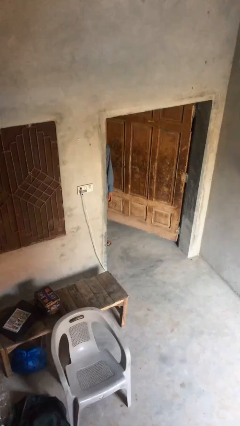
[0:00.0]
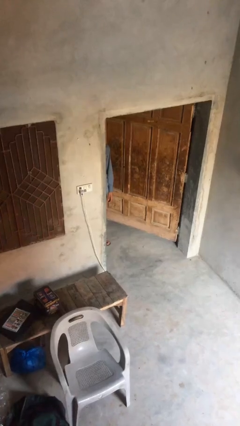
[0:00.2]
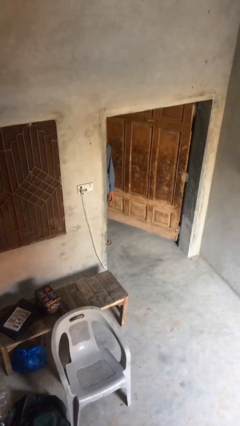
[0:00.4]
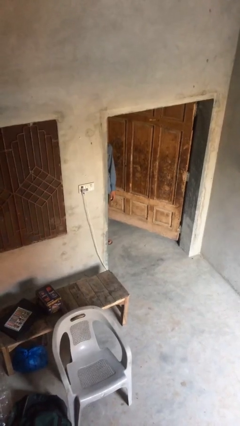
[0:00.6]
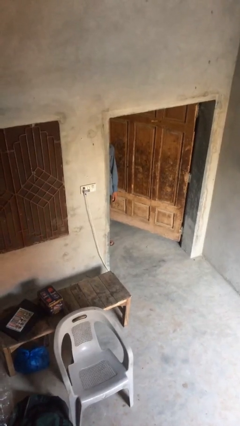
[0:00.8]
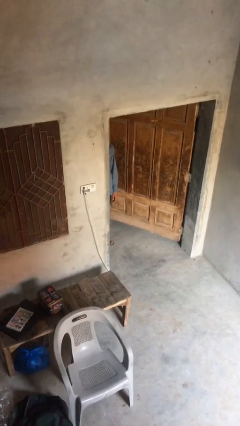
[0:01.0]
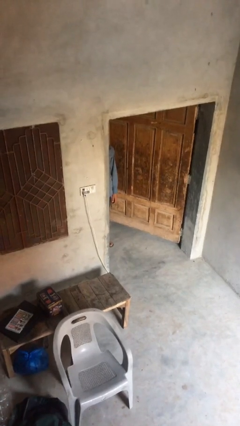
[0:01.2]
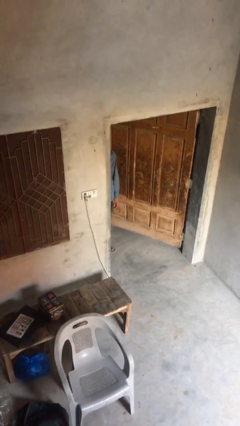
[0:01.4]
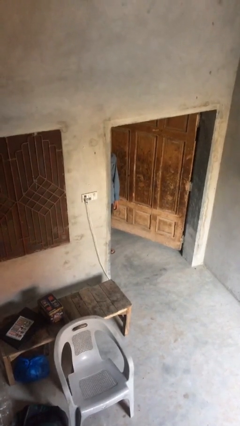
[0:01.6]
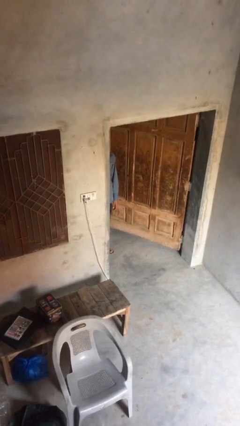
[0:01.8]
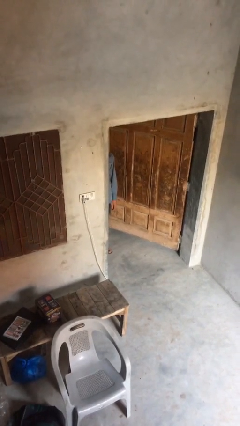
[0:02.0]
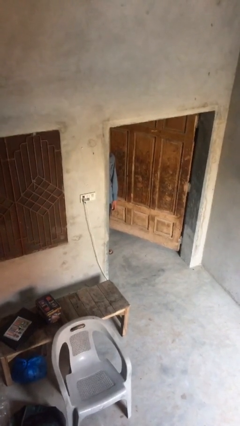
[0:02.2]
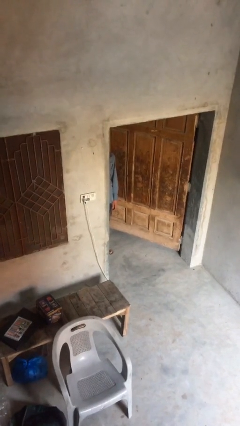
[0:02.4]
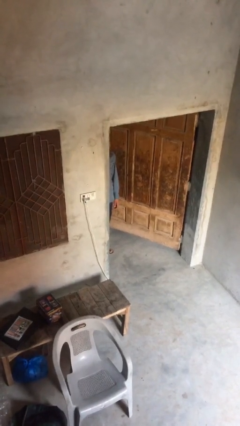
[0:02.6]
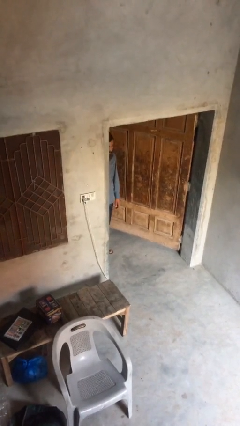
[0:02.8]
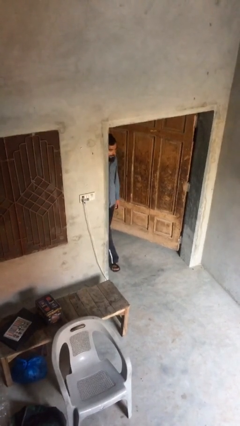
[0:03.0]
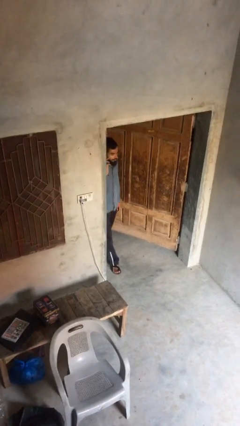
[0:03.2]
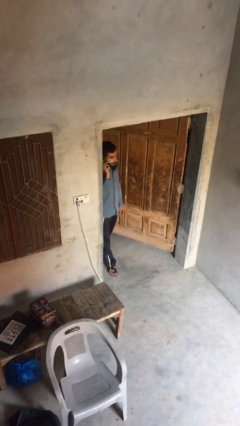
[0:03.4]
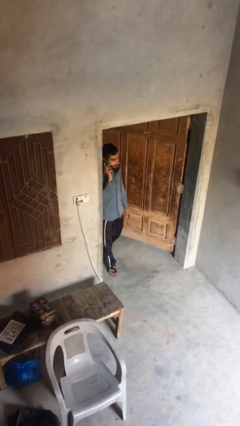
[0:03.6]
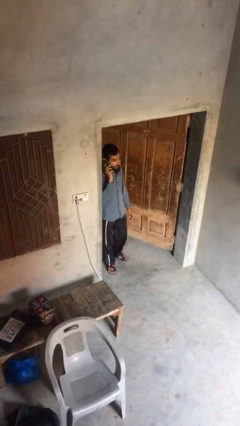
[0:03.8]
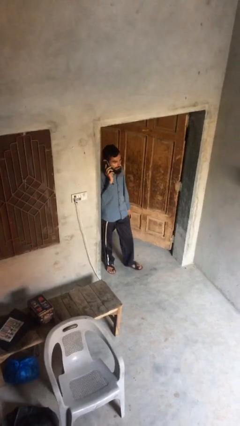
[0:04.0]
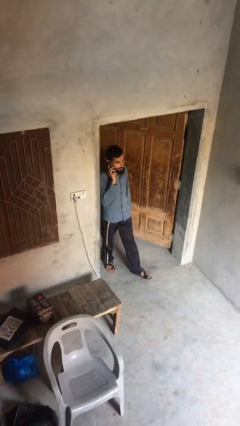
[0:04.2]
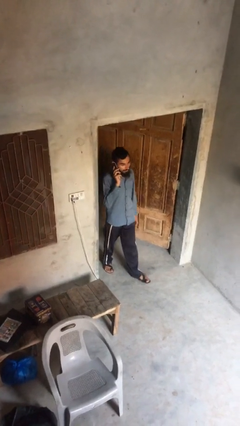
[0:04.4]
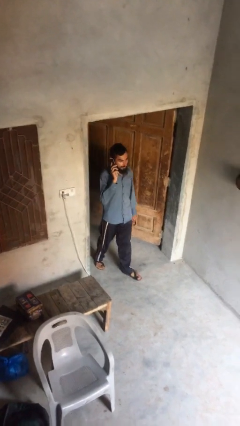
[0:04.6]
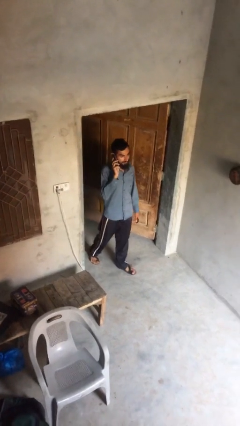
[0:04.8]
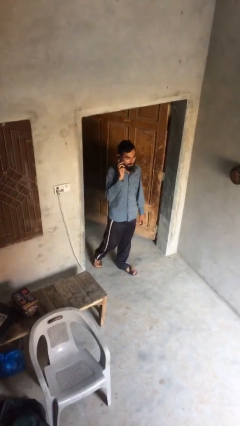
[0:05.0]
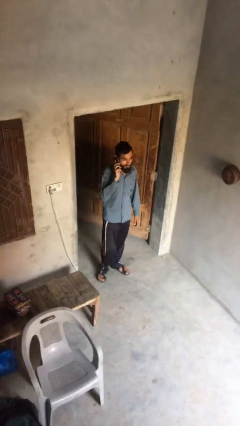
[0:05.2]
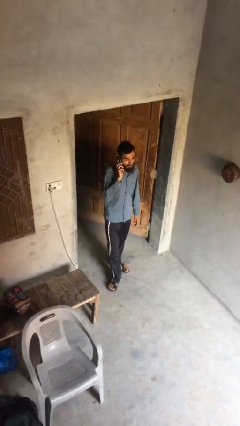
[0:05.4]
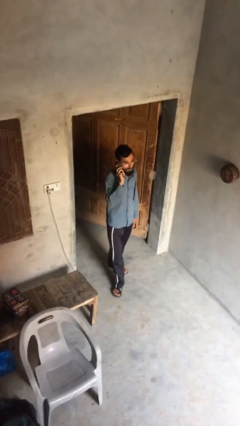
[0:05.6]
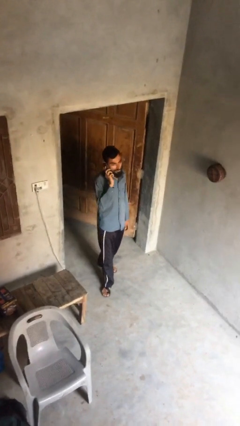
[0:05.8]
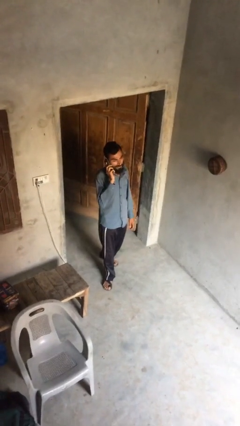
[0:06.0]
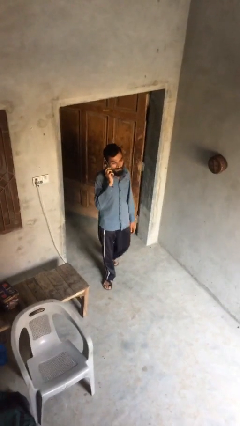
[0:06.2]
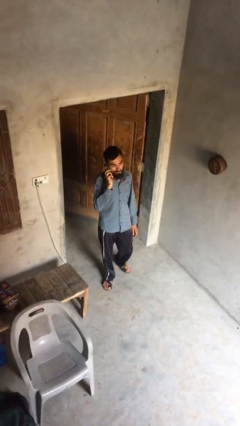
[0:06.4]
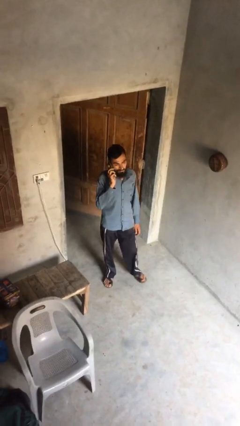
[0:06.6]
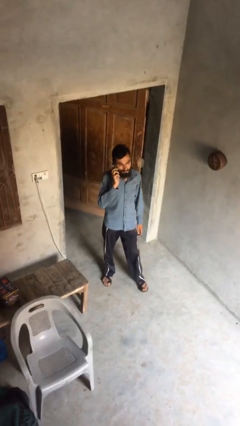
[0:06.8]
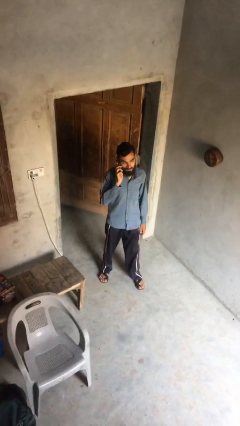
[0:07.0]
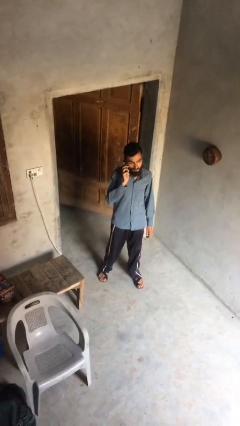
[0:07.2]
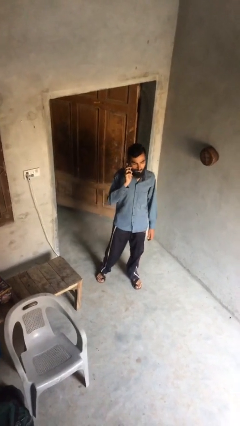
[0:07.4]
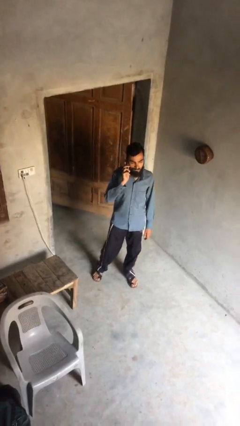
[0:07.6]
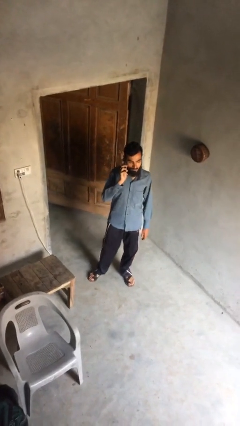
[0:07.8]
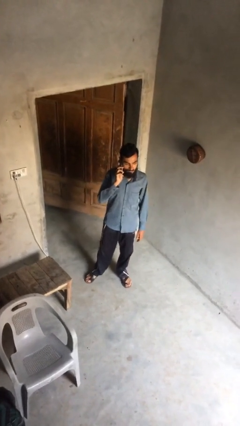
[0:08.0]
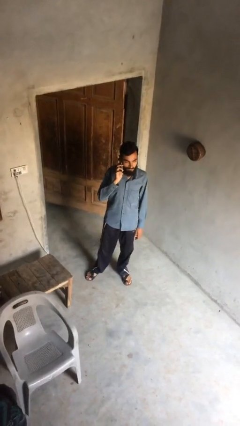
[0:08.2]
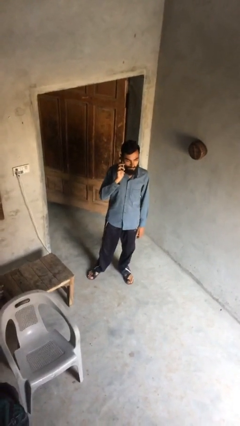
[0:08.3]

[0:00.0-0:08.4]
person enters scene through structure

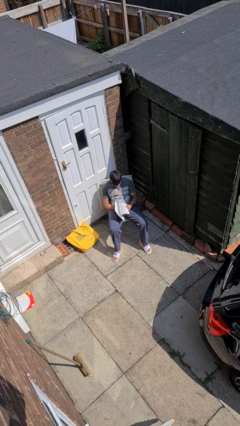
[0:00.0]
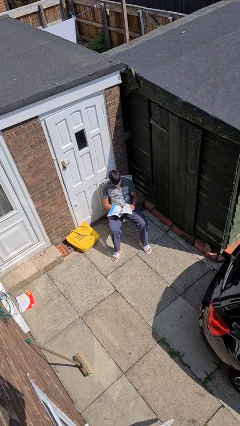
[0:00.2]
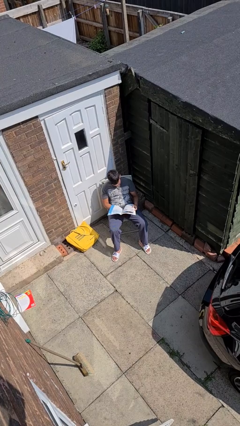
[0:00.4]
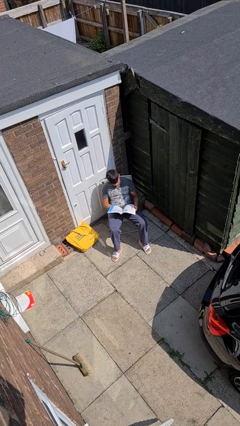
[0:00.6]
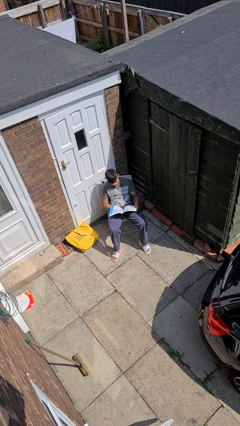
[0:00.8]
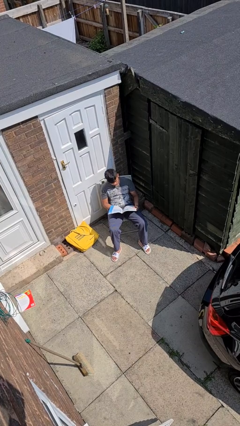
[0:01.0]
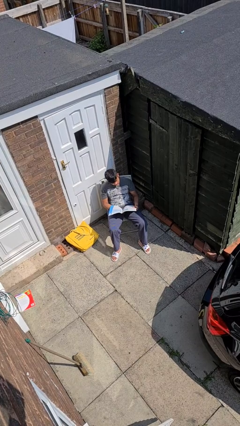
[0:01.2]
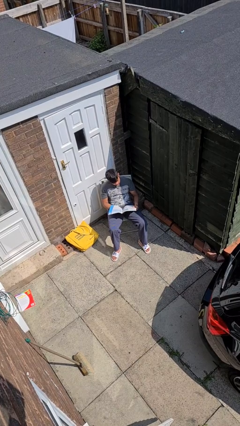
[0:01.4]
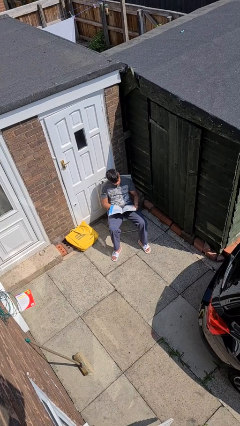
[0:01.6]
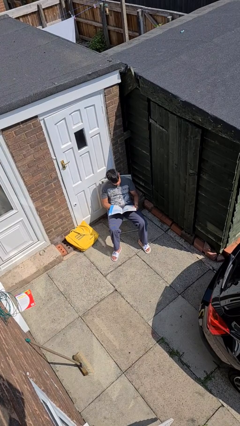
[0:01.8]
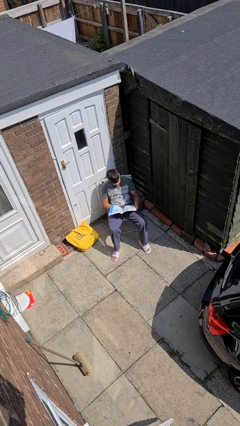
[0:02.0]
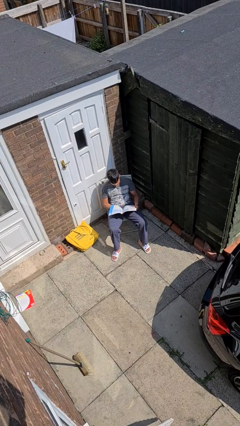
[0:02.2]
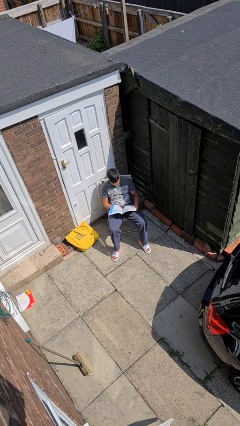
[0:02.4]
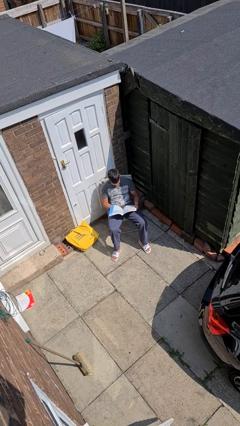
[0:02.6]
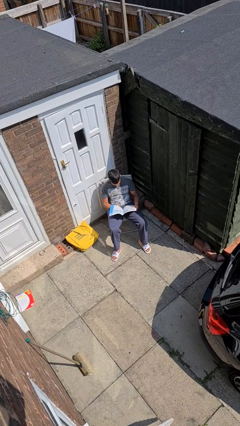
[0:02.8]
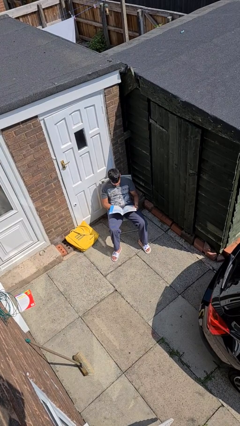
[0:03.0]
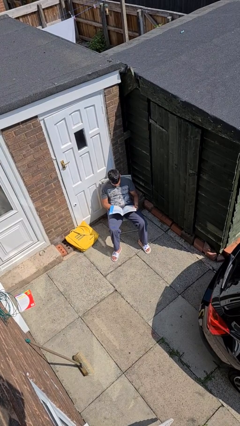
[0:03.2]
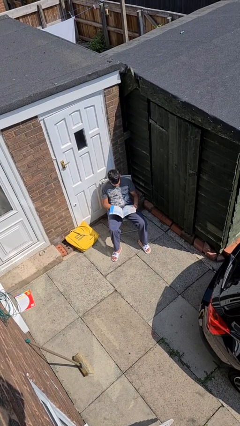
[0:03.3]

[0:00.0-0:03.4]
person reads newspaper

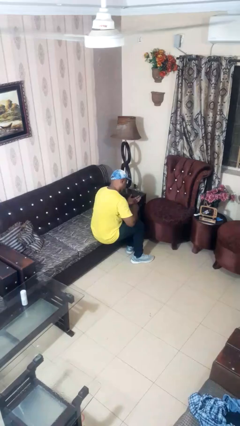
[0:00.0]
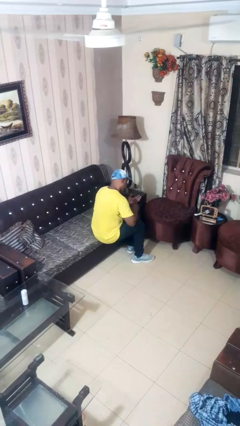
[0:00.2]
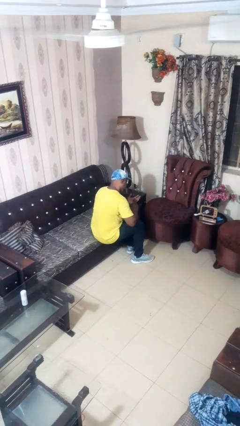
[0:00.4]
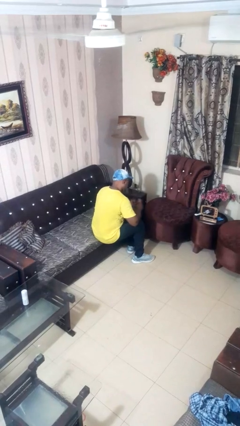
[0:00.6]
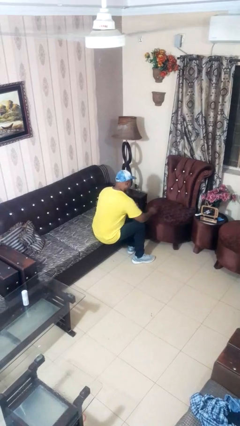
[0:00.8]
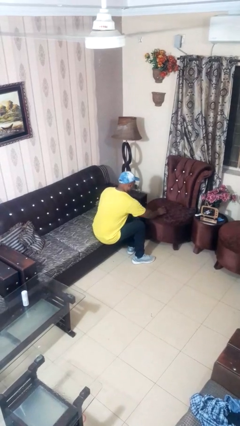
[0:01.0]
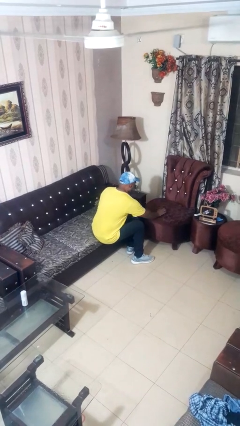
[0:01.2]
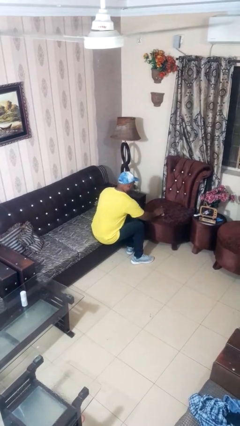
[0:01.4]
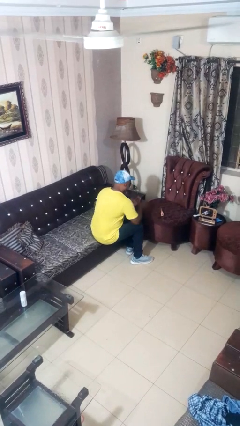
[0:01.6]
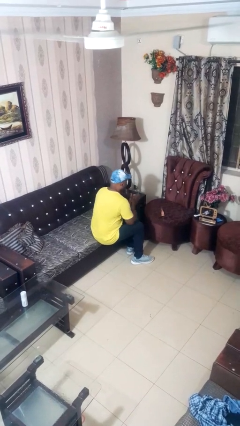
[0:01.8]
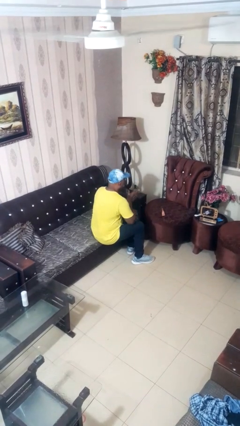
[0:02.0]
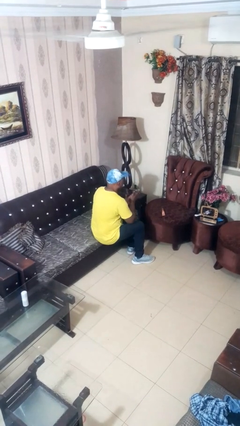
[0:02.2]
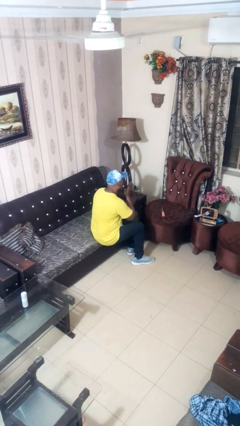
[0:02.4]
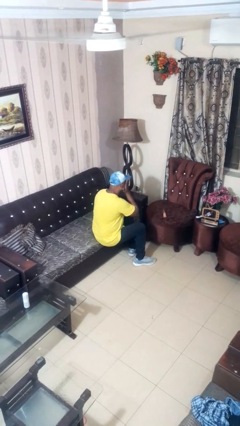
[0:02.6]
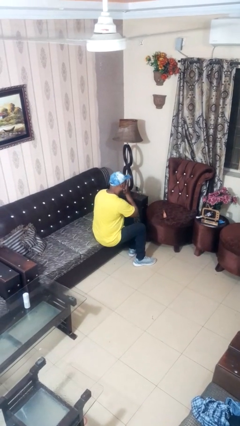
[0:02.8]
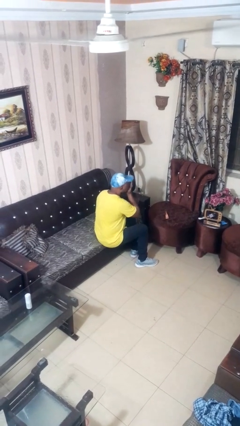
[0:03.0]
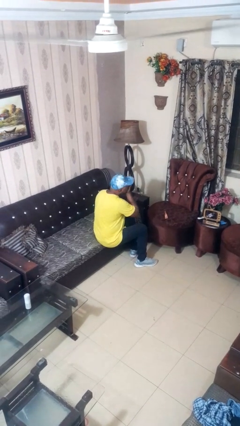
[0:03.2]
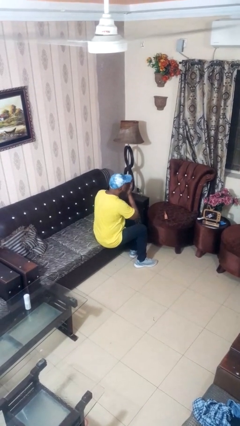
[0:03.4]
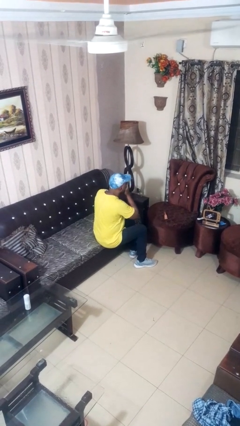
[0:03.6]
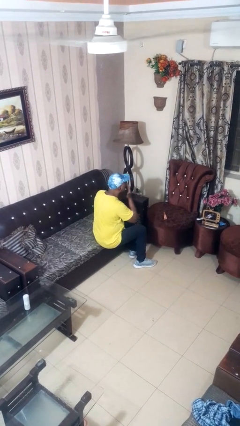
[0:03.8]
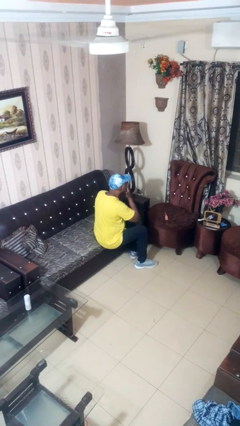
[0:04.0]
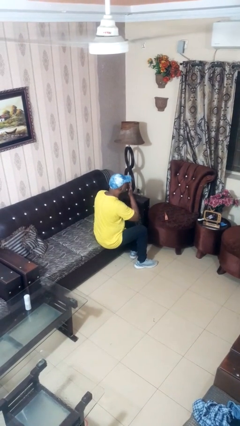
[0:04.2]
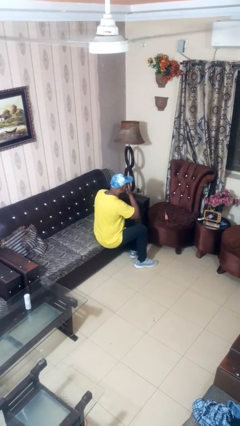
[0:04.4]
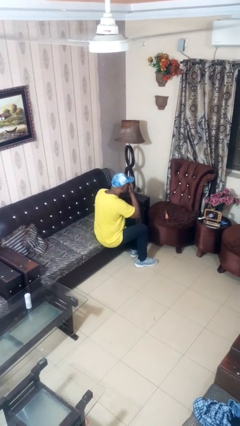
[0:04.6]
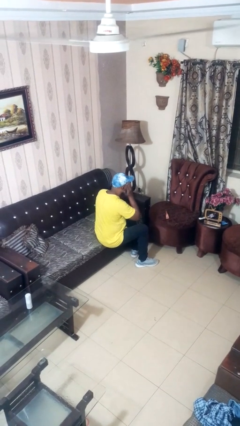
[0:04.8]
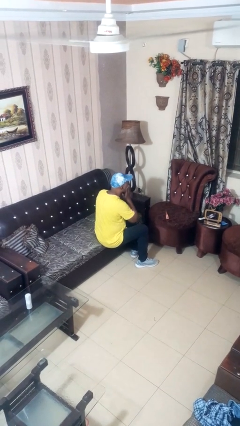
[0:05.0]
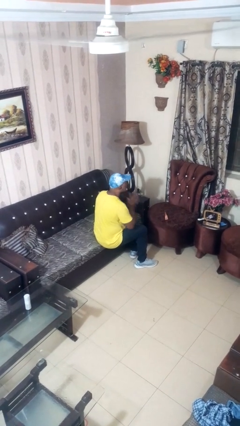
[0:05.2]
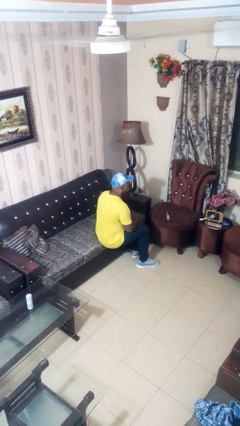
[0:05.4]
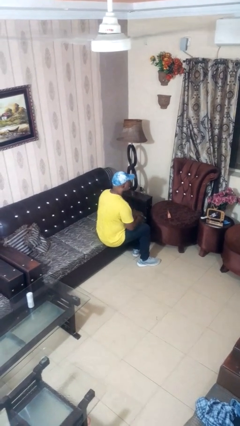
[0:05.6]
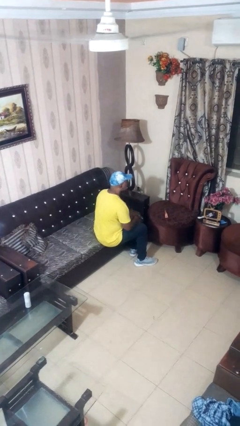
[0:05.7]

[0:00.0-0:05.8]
person applies foundation makeup
